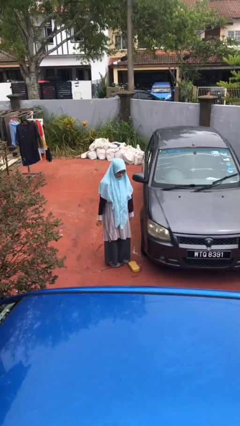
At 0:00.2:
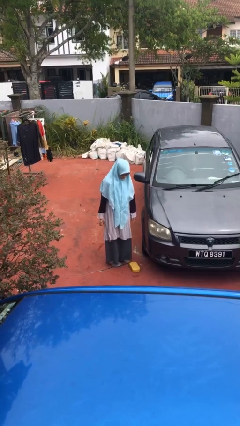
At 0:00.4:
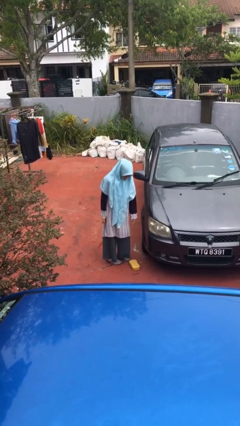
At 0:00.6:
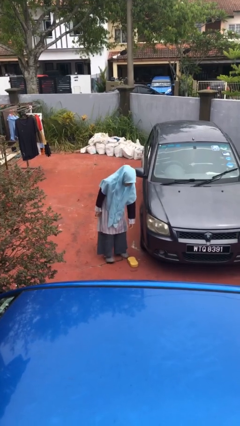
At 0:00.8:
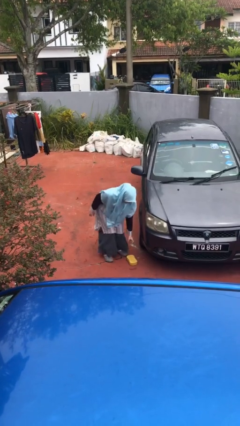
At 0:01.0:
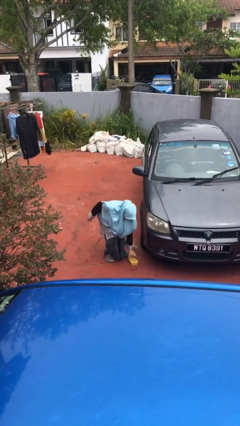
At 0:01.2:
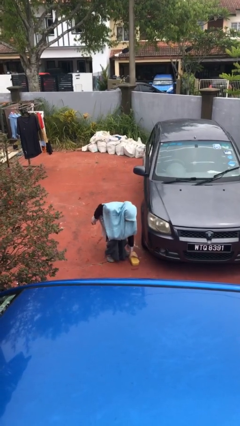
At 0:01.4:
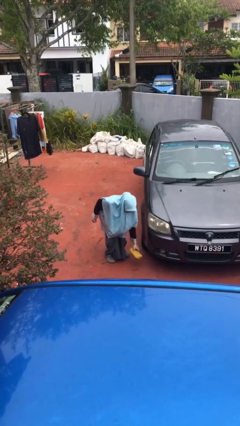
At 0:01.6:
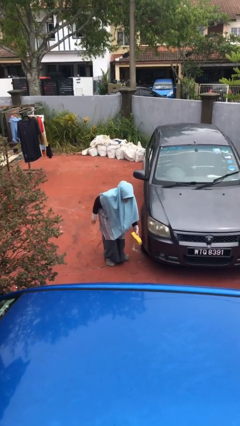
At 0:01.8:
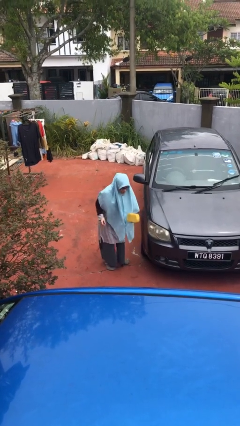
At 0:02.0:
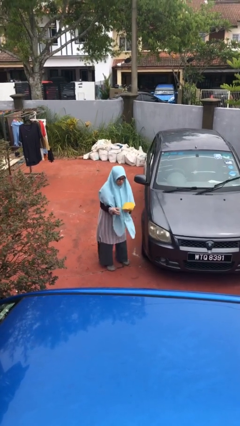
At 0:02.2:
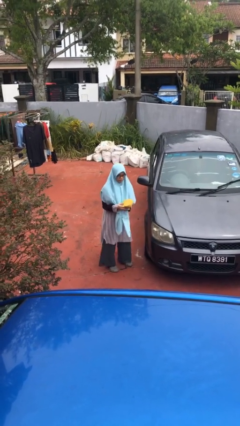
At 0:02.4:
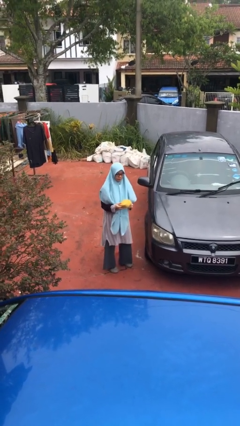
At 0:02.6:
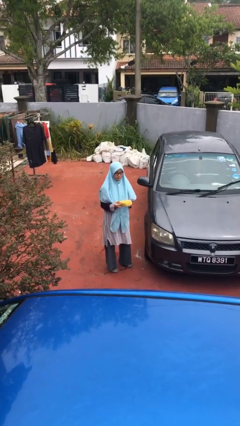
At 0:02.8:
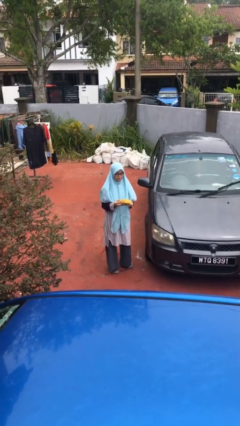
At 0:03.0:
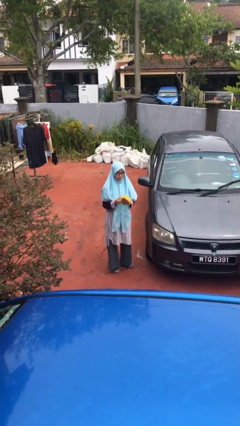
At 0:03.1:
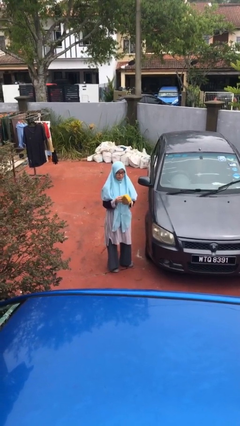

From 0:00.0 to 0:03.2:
person picks up object from floor

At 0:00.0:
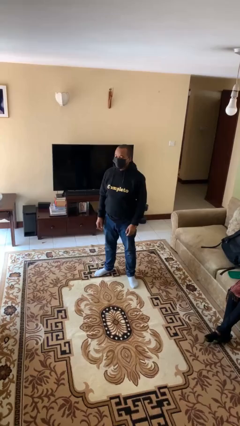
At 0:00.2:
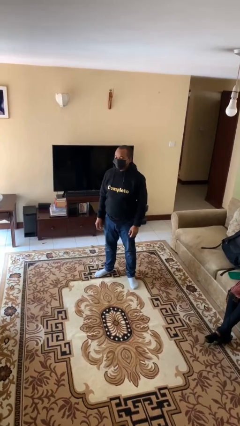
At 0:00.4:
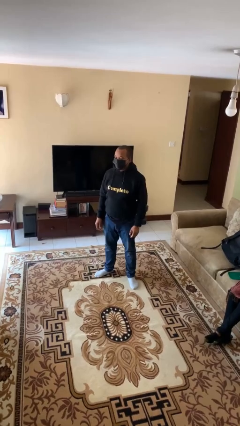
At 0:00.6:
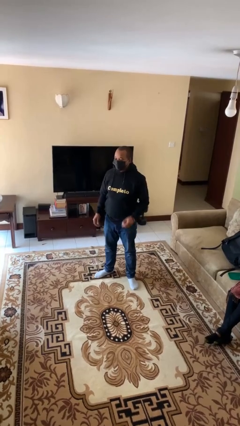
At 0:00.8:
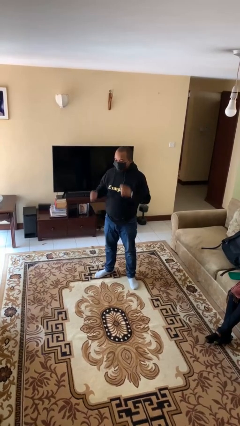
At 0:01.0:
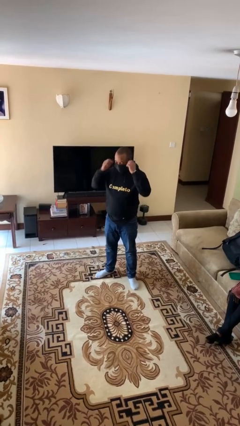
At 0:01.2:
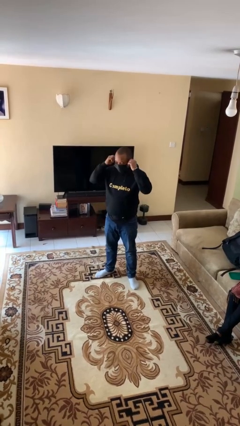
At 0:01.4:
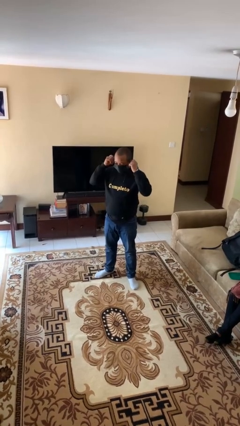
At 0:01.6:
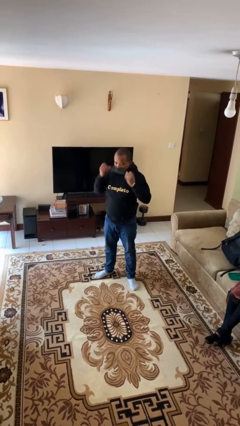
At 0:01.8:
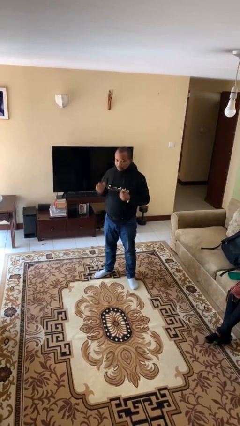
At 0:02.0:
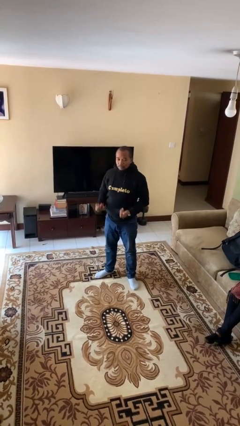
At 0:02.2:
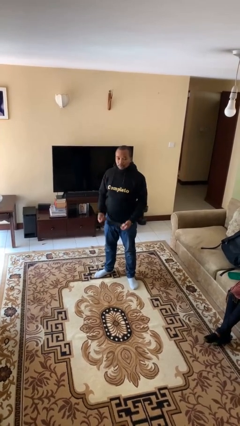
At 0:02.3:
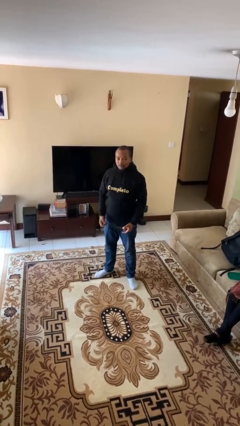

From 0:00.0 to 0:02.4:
person takes off facemask

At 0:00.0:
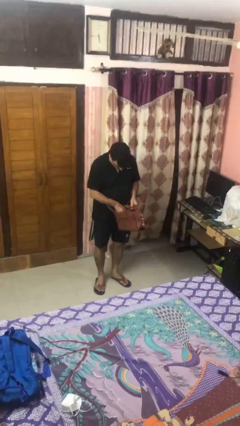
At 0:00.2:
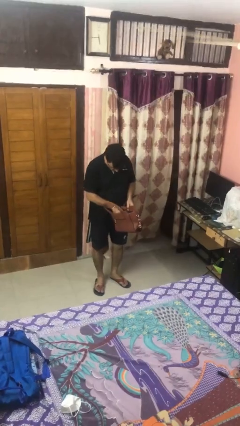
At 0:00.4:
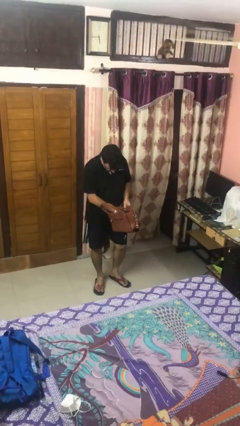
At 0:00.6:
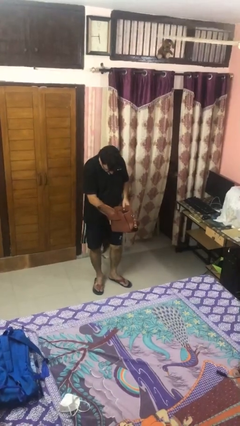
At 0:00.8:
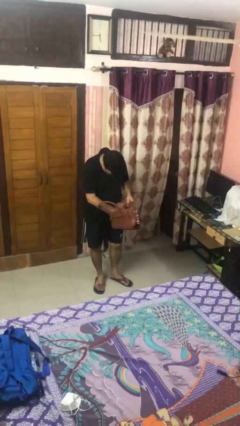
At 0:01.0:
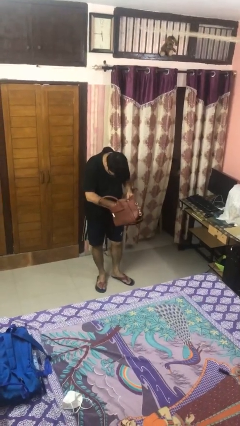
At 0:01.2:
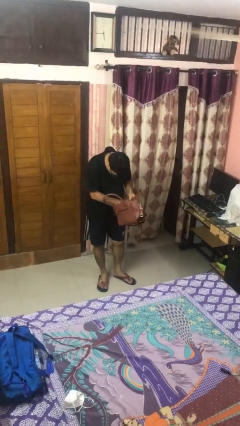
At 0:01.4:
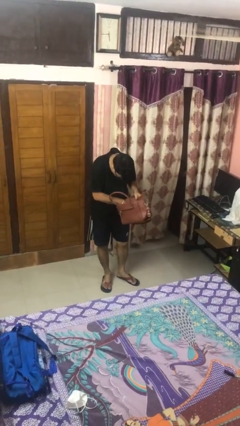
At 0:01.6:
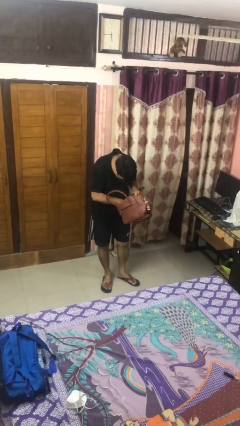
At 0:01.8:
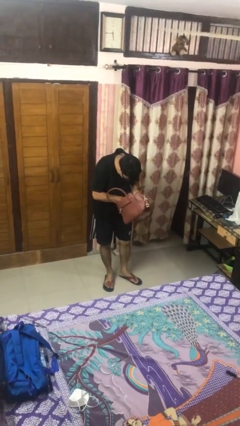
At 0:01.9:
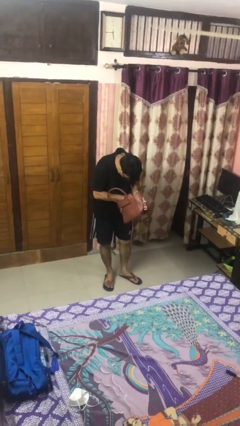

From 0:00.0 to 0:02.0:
person searches in purse

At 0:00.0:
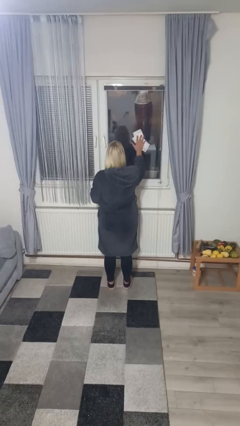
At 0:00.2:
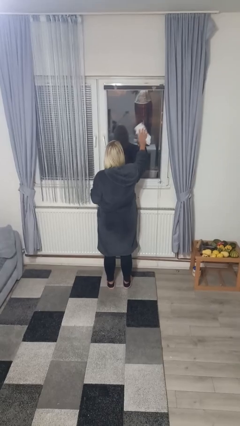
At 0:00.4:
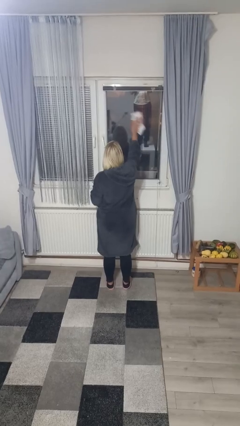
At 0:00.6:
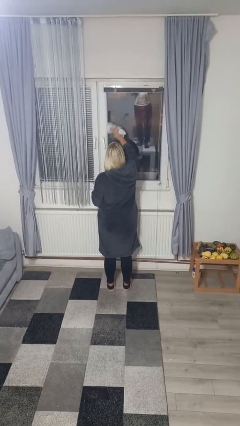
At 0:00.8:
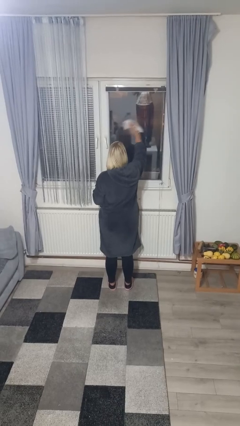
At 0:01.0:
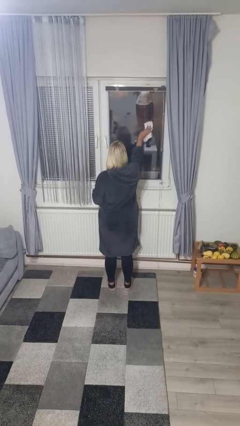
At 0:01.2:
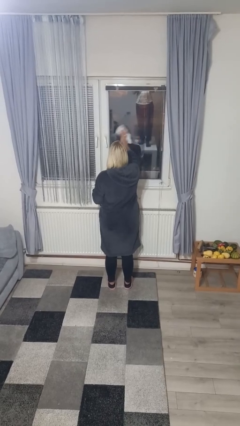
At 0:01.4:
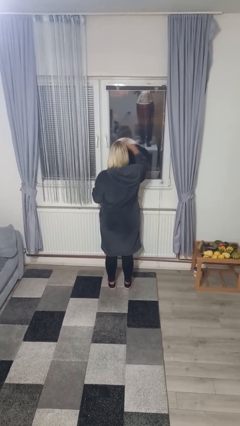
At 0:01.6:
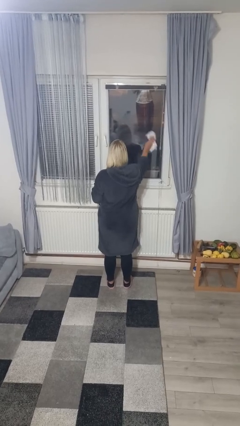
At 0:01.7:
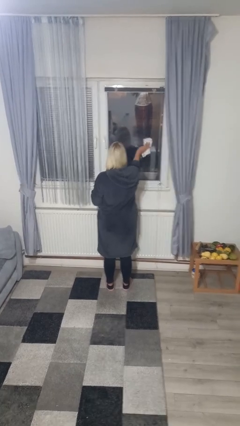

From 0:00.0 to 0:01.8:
person washes window

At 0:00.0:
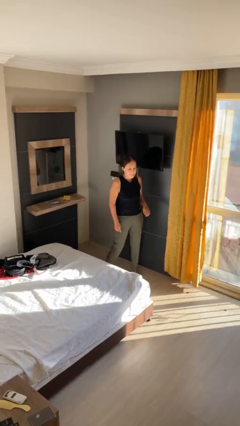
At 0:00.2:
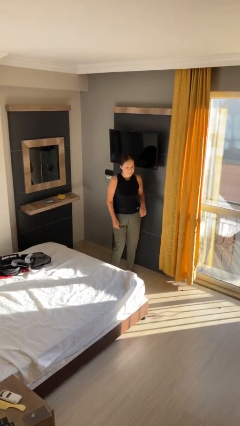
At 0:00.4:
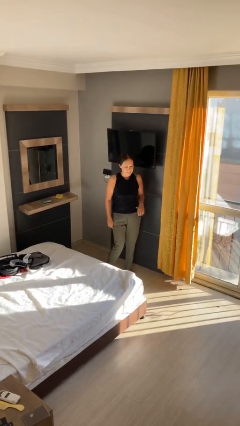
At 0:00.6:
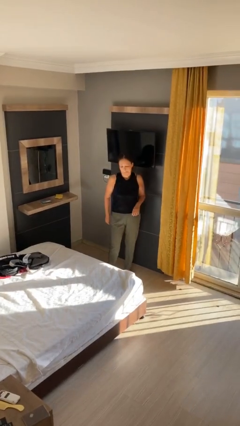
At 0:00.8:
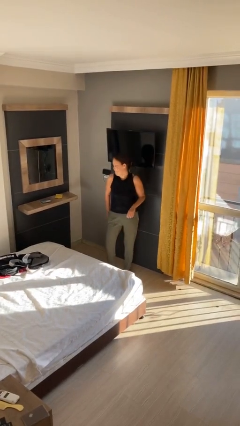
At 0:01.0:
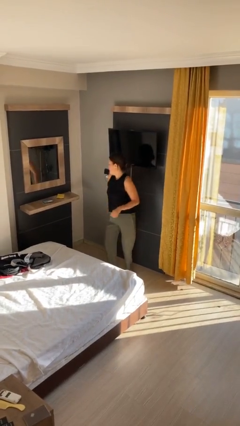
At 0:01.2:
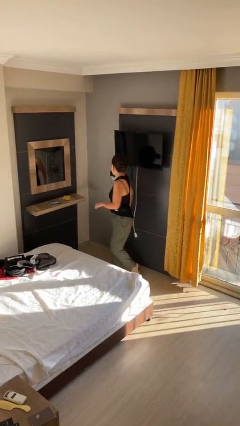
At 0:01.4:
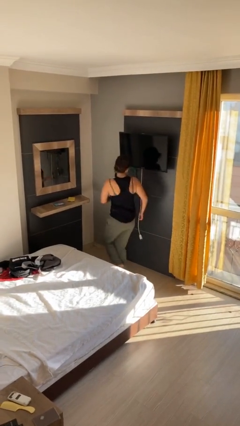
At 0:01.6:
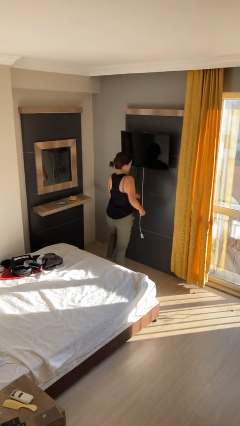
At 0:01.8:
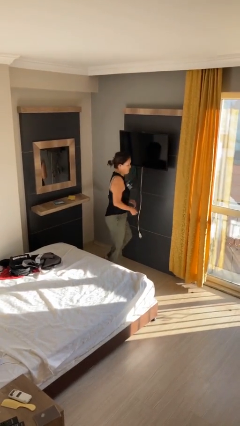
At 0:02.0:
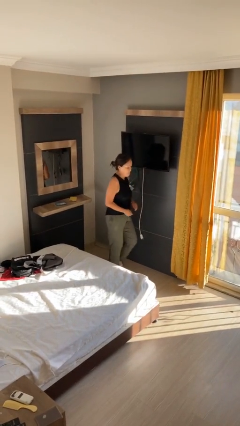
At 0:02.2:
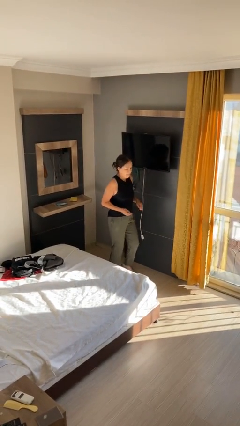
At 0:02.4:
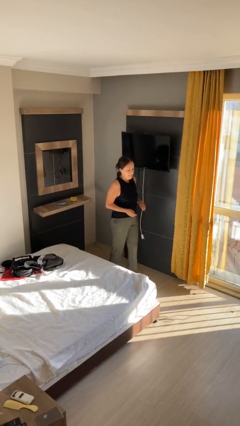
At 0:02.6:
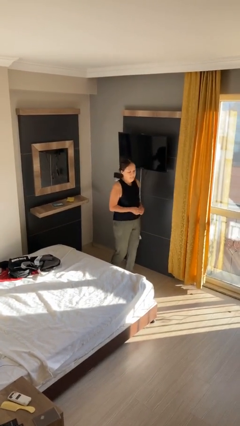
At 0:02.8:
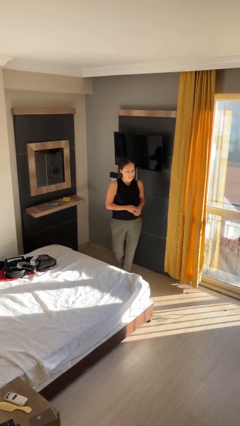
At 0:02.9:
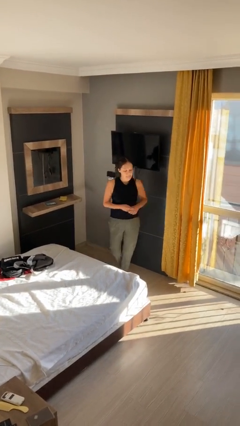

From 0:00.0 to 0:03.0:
person twirls

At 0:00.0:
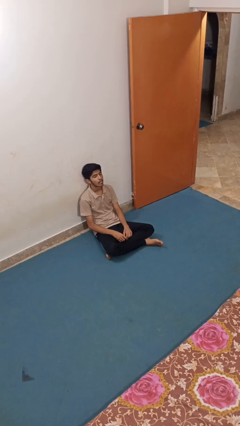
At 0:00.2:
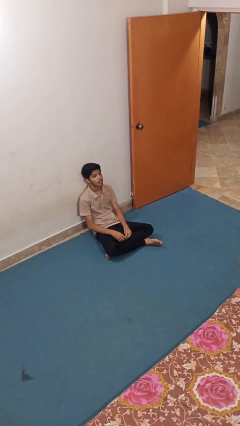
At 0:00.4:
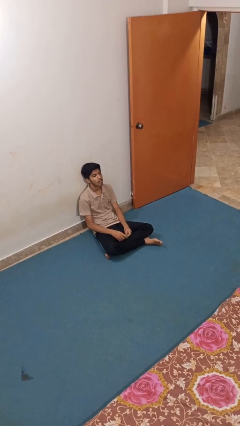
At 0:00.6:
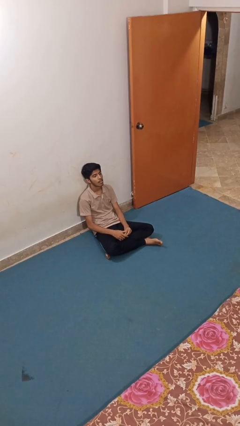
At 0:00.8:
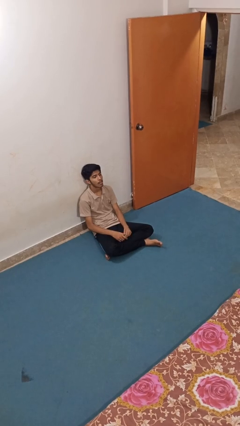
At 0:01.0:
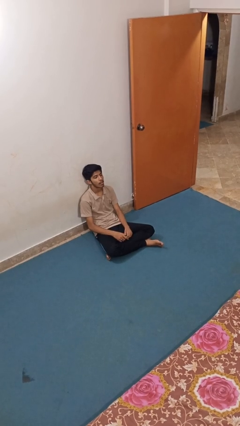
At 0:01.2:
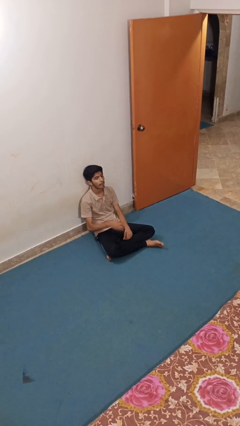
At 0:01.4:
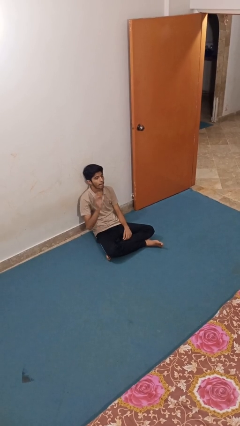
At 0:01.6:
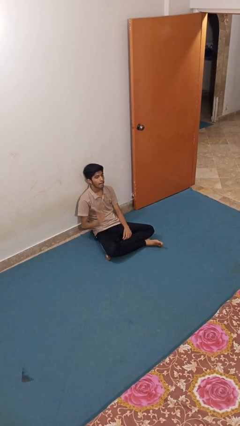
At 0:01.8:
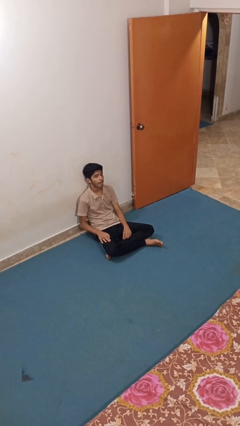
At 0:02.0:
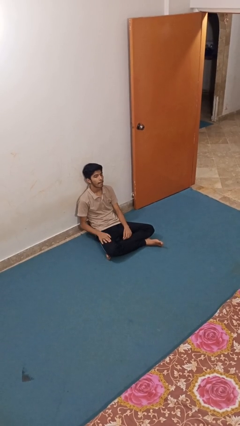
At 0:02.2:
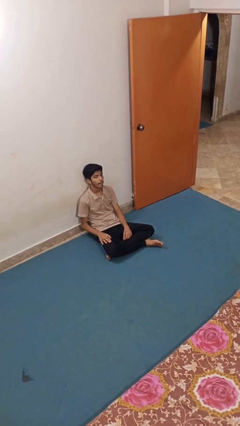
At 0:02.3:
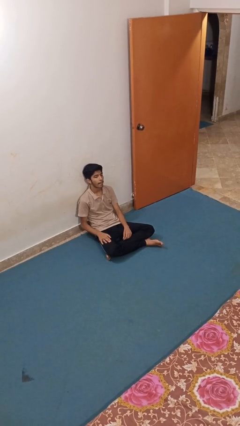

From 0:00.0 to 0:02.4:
person slaps hands on thighs

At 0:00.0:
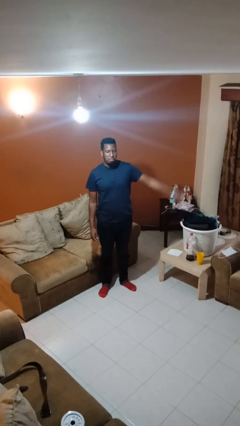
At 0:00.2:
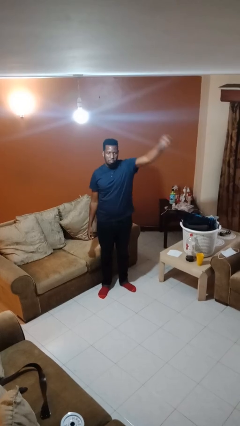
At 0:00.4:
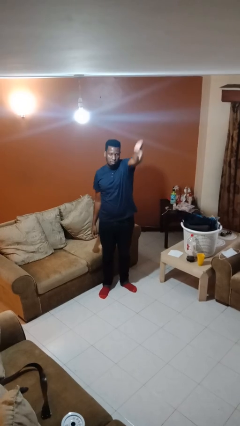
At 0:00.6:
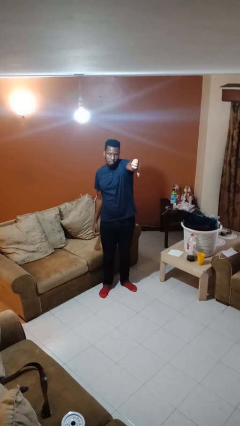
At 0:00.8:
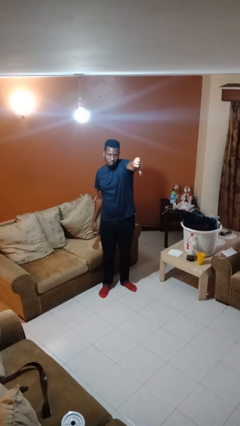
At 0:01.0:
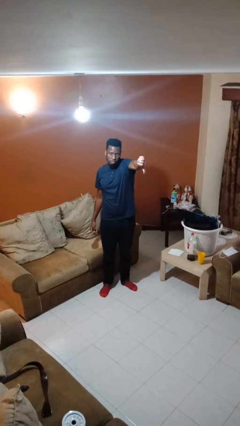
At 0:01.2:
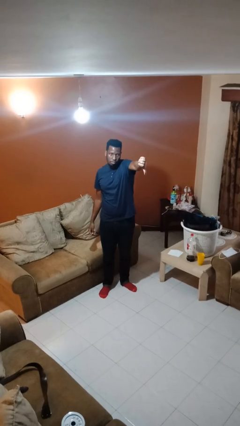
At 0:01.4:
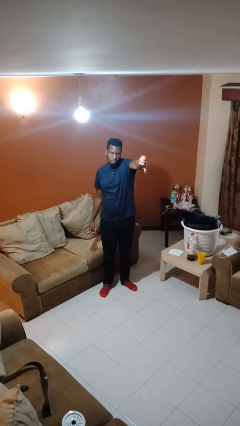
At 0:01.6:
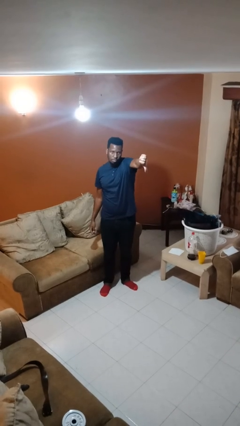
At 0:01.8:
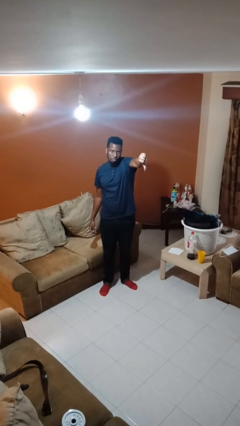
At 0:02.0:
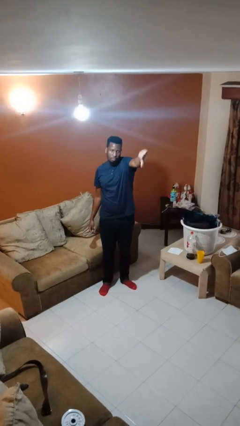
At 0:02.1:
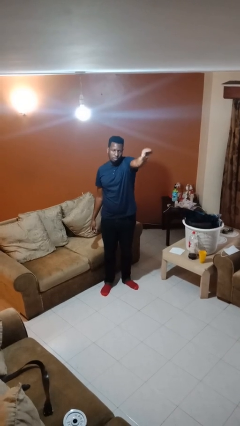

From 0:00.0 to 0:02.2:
person gestures thumbs down
